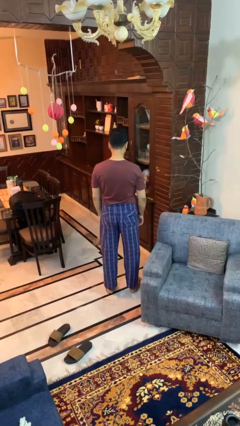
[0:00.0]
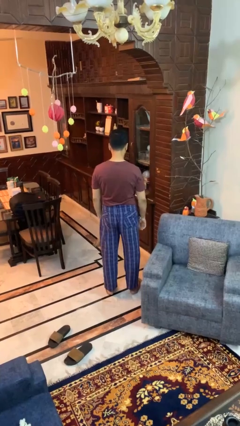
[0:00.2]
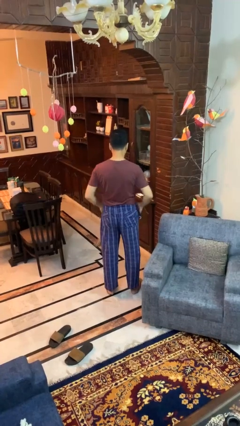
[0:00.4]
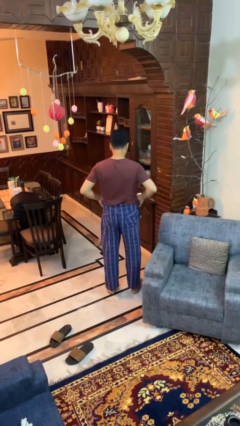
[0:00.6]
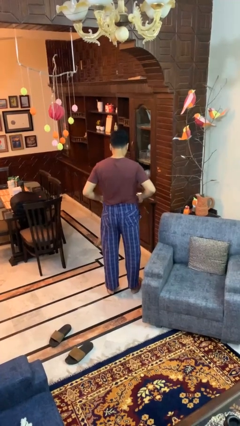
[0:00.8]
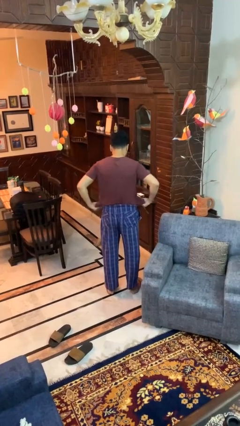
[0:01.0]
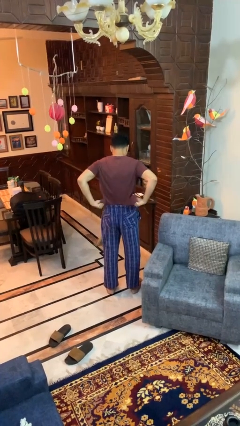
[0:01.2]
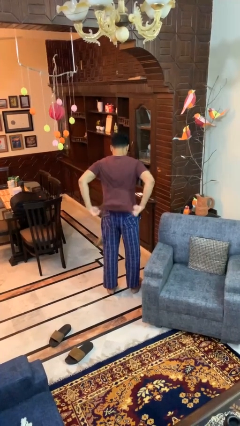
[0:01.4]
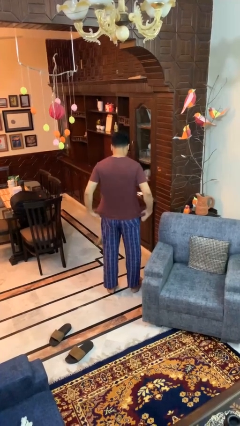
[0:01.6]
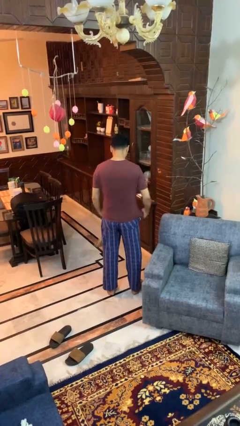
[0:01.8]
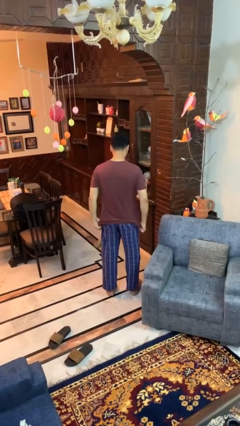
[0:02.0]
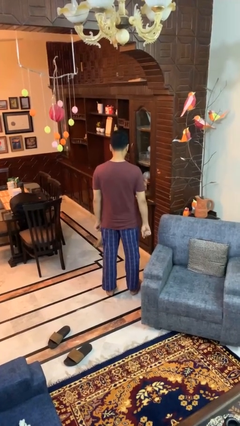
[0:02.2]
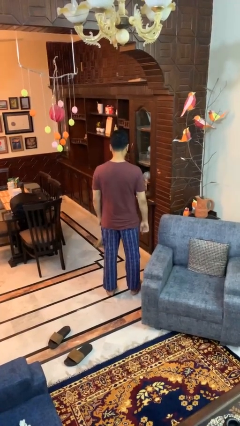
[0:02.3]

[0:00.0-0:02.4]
person untucks shirt

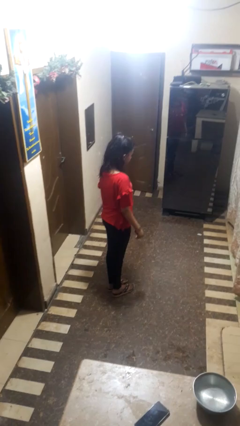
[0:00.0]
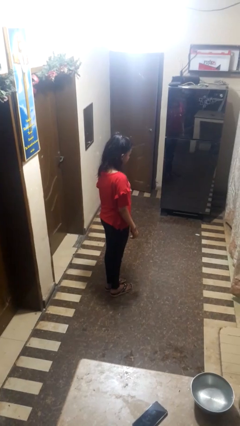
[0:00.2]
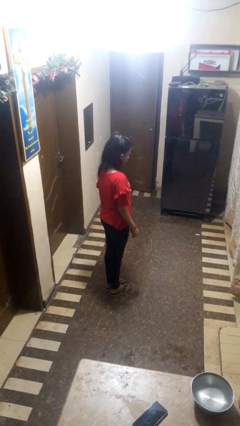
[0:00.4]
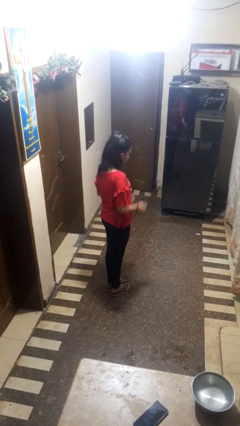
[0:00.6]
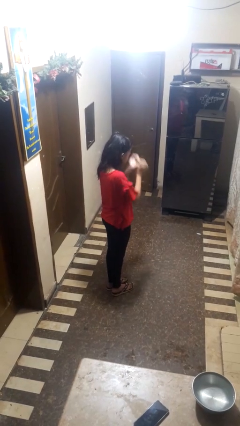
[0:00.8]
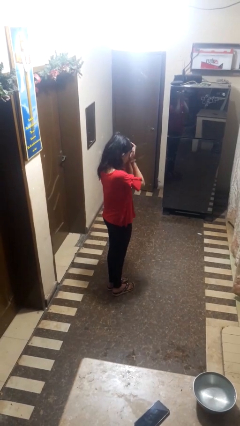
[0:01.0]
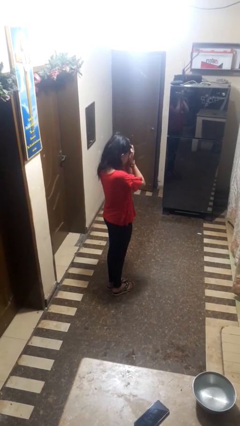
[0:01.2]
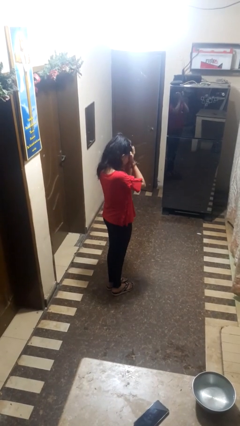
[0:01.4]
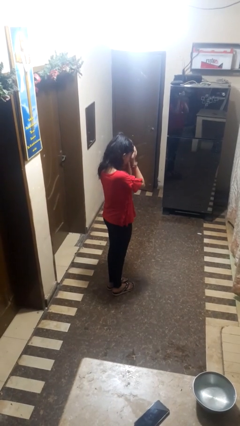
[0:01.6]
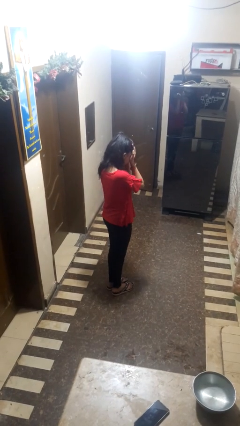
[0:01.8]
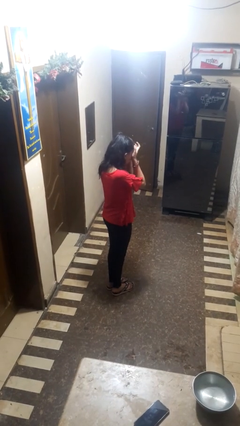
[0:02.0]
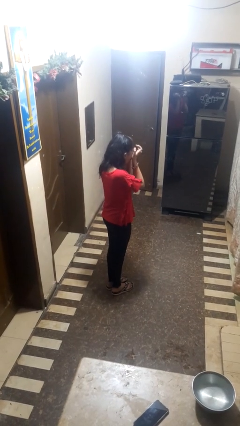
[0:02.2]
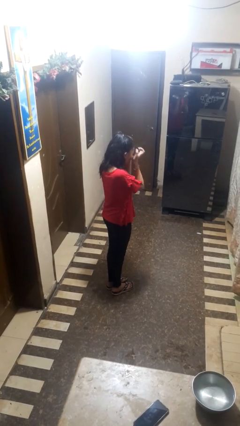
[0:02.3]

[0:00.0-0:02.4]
person rubs eyes

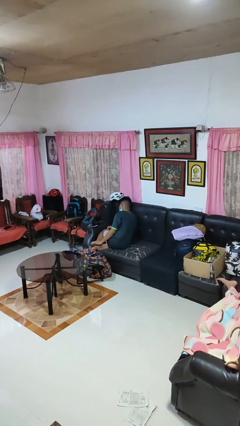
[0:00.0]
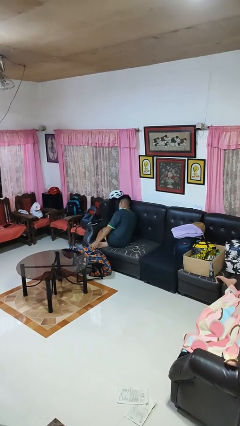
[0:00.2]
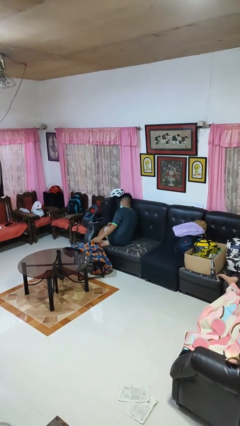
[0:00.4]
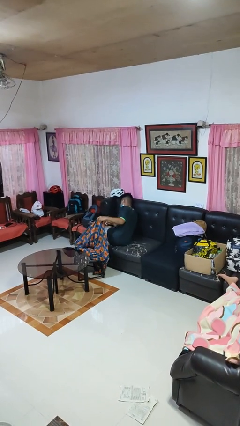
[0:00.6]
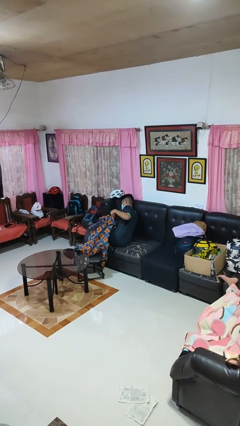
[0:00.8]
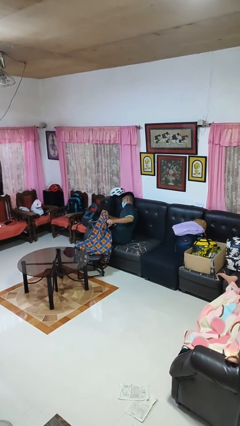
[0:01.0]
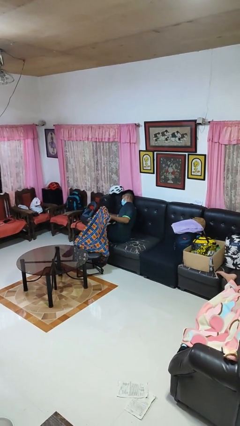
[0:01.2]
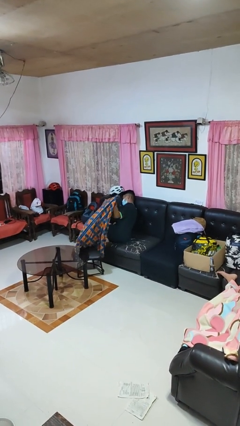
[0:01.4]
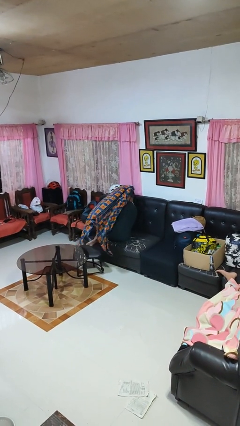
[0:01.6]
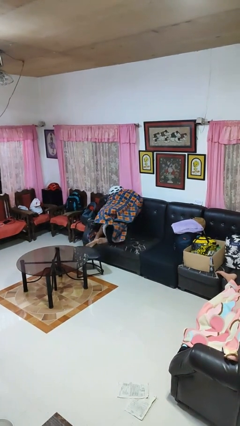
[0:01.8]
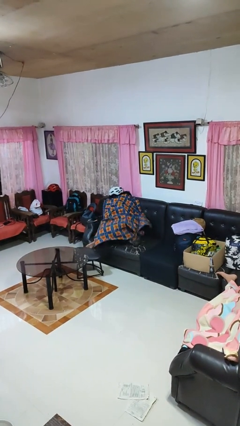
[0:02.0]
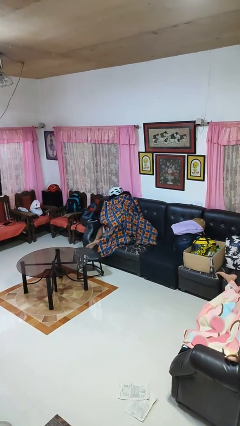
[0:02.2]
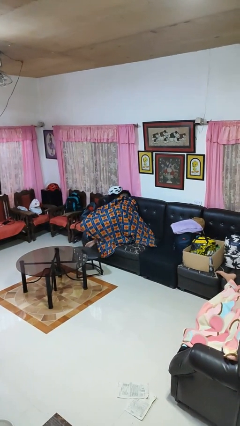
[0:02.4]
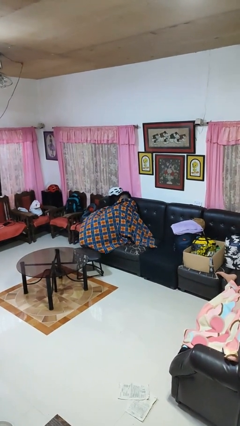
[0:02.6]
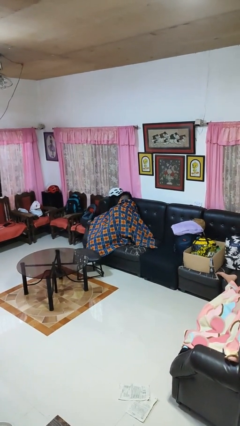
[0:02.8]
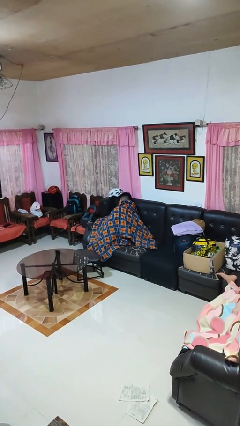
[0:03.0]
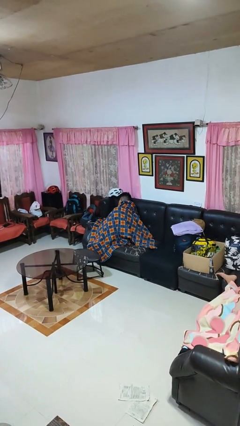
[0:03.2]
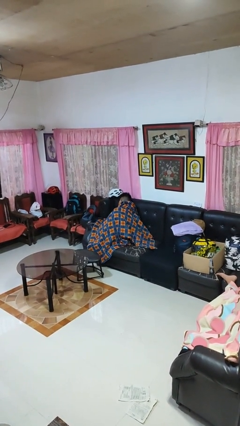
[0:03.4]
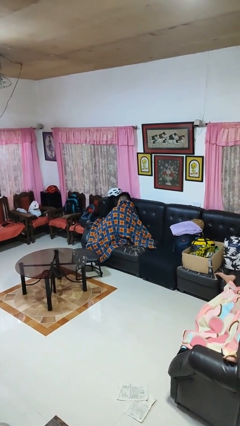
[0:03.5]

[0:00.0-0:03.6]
person covers with blanket

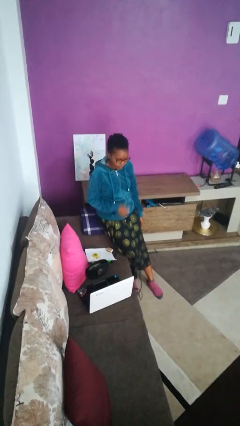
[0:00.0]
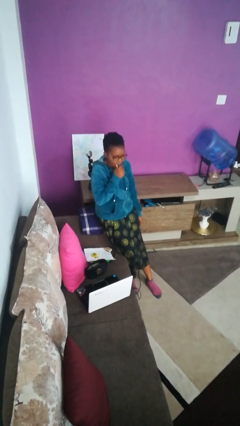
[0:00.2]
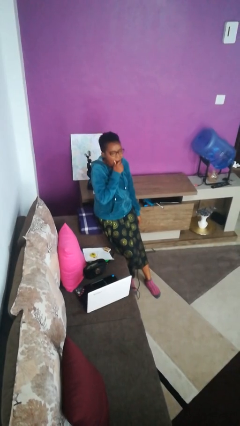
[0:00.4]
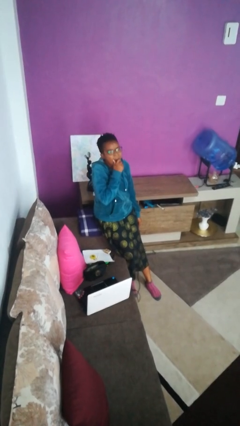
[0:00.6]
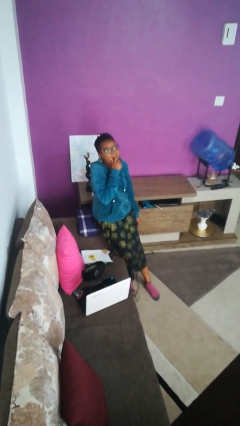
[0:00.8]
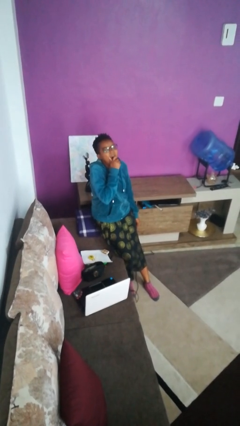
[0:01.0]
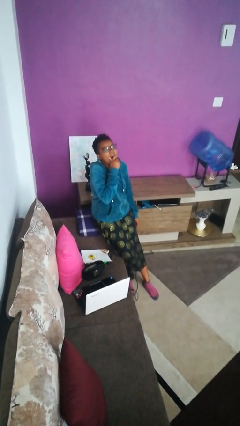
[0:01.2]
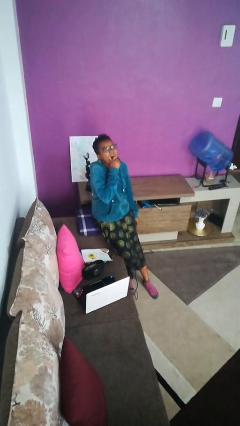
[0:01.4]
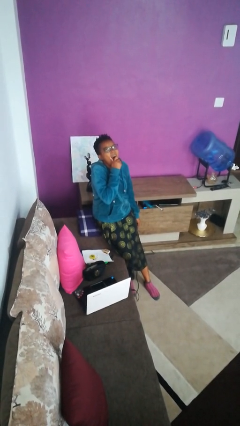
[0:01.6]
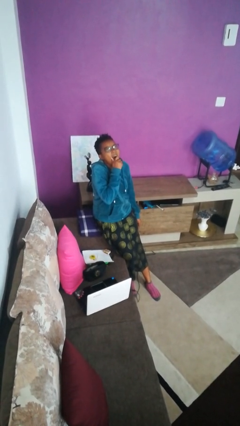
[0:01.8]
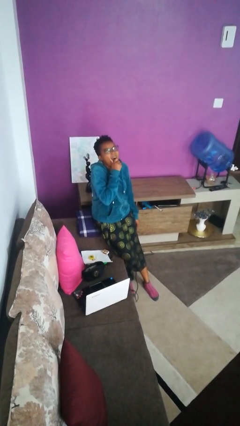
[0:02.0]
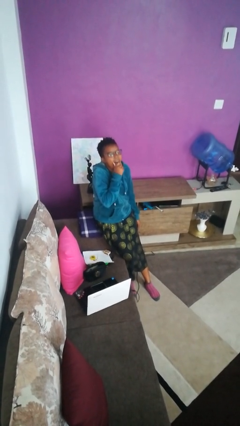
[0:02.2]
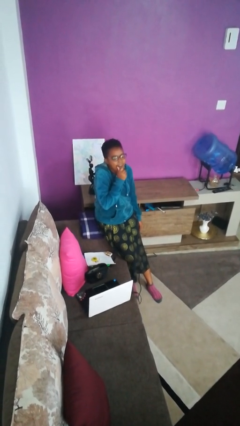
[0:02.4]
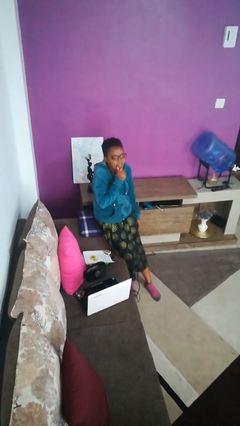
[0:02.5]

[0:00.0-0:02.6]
person yawns

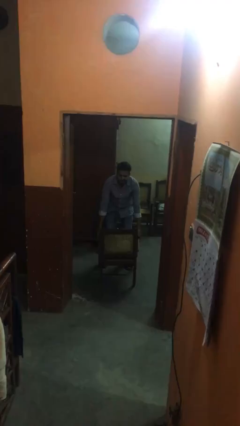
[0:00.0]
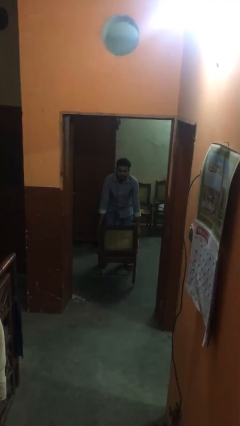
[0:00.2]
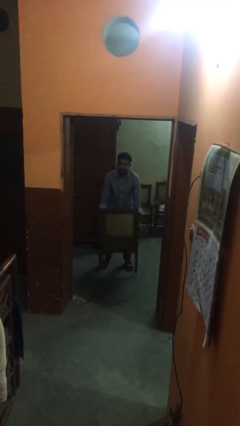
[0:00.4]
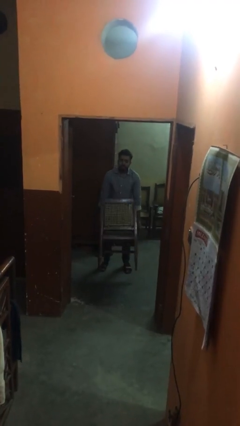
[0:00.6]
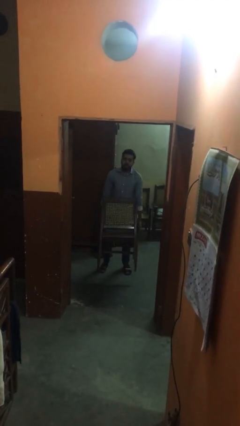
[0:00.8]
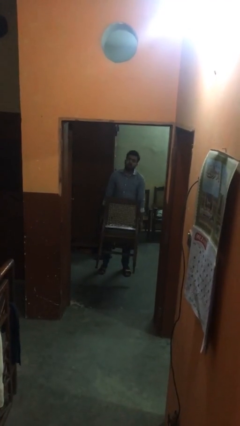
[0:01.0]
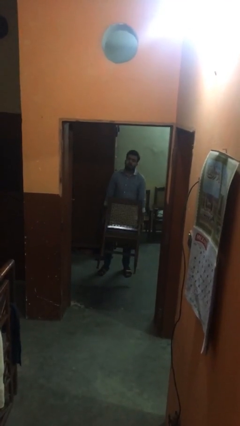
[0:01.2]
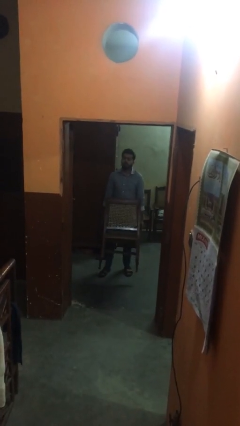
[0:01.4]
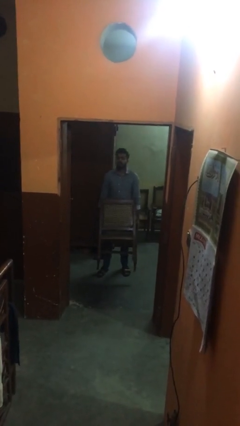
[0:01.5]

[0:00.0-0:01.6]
person picks up object from floor

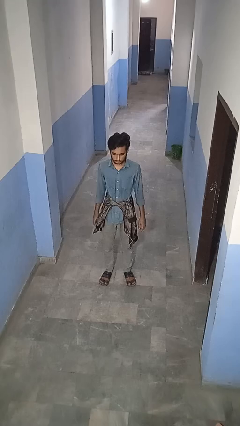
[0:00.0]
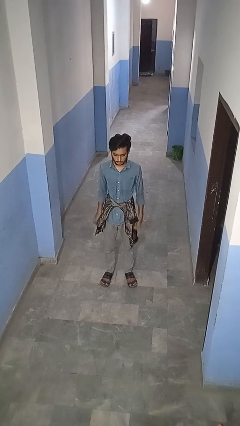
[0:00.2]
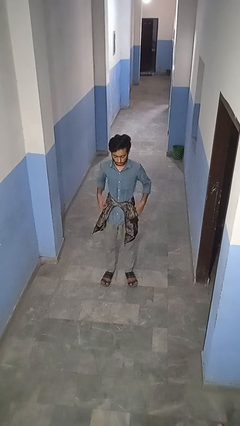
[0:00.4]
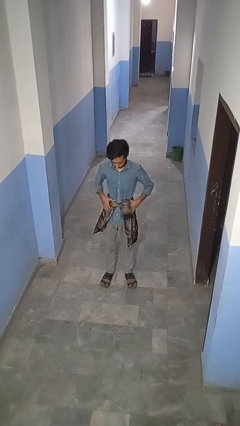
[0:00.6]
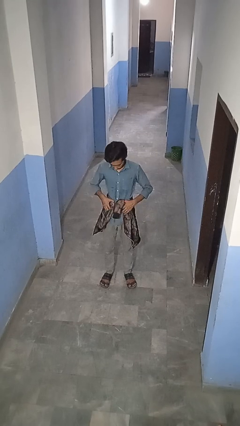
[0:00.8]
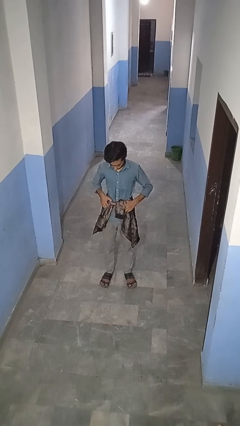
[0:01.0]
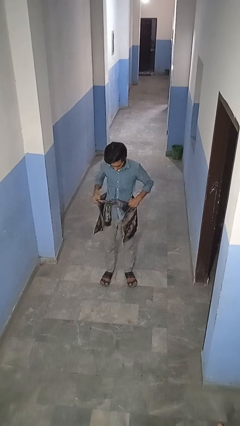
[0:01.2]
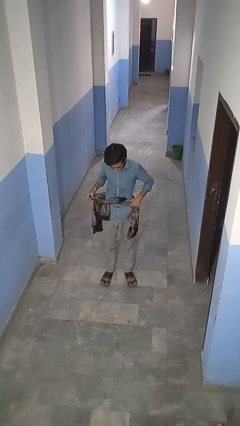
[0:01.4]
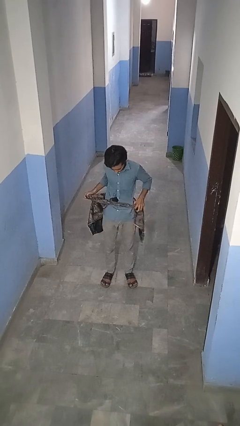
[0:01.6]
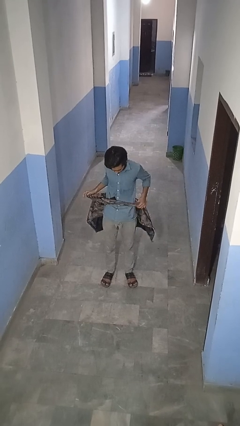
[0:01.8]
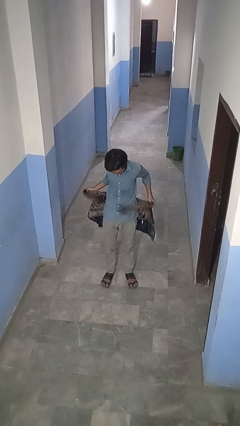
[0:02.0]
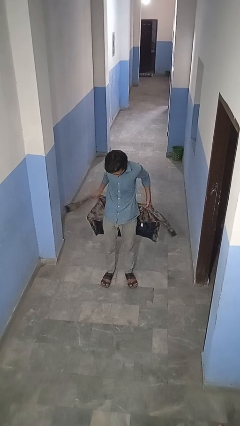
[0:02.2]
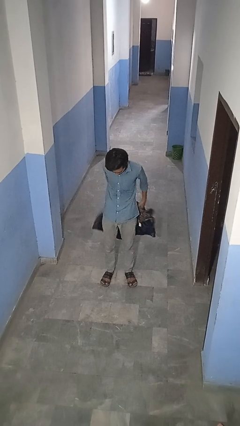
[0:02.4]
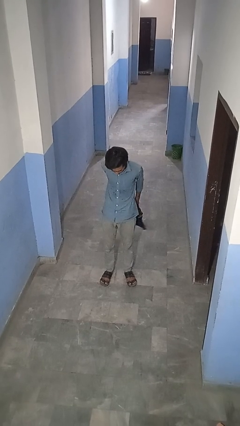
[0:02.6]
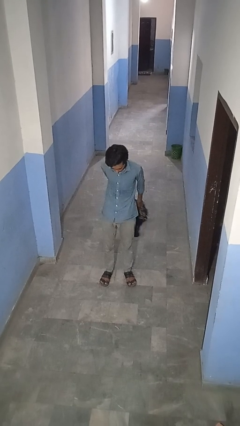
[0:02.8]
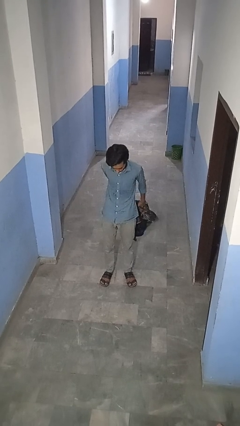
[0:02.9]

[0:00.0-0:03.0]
person unties jacket around waist

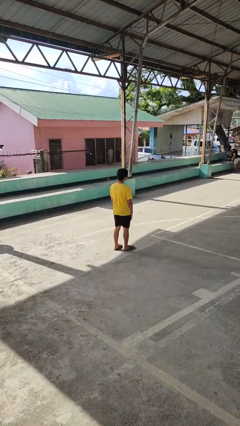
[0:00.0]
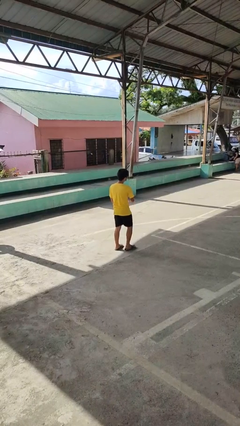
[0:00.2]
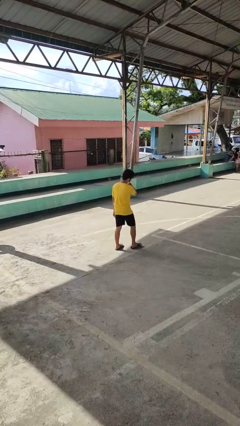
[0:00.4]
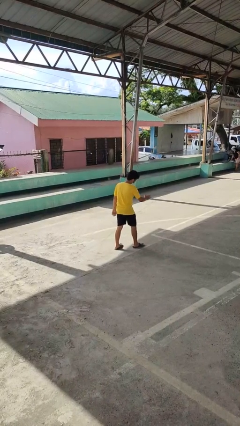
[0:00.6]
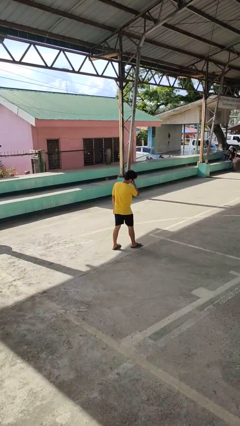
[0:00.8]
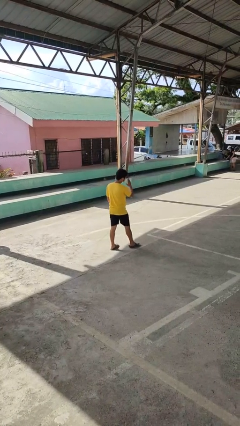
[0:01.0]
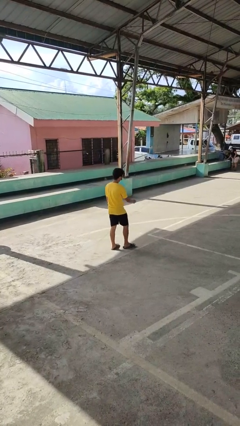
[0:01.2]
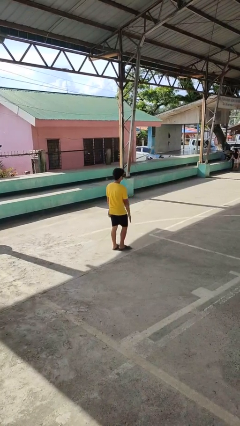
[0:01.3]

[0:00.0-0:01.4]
person karate chop
